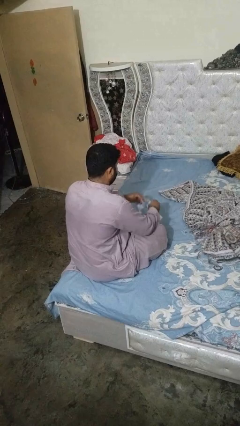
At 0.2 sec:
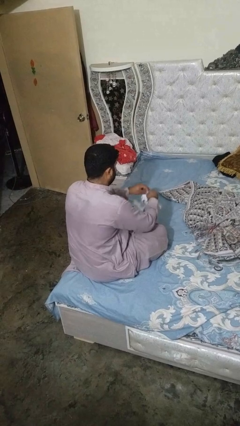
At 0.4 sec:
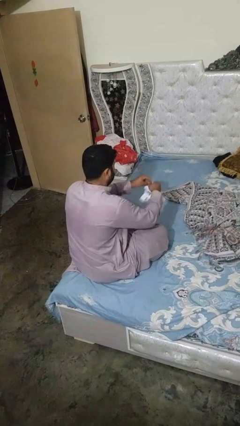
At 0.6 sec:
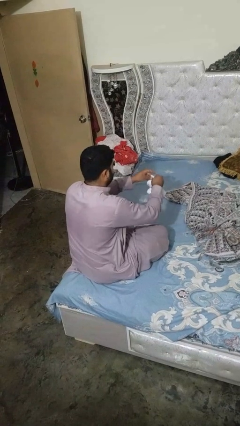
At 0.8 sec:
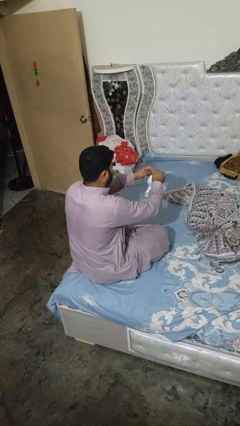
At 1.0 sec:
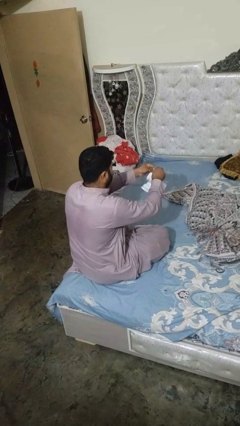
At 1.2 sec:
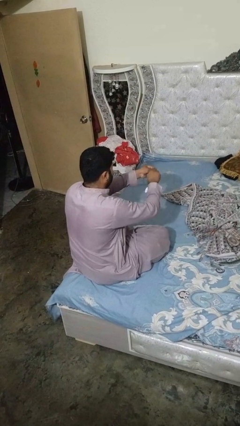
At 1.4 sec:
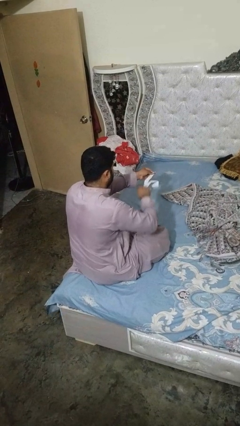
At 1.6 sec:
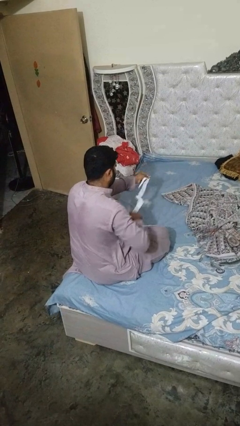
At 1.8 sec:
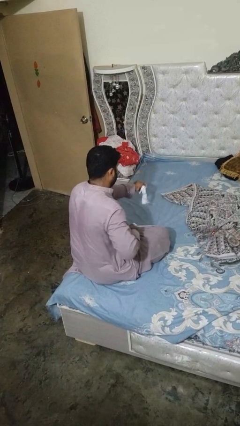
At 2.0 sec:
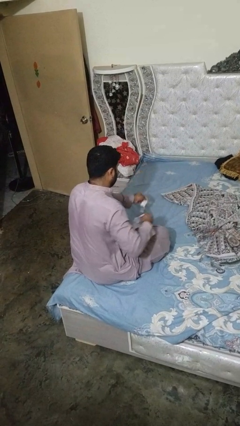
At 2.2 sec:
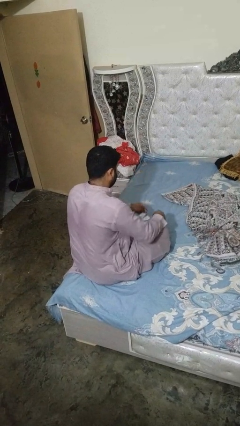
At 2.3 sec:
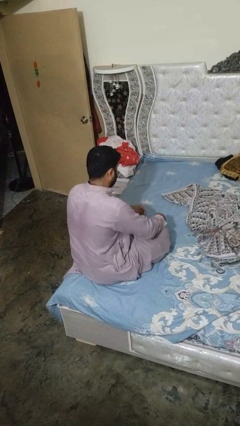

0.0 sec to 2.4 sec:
person tears paper

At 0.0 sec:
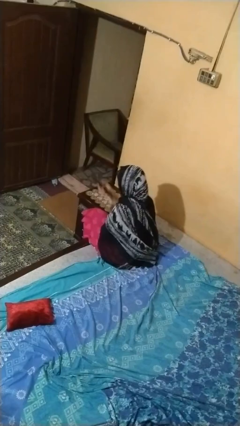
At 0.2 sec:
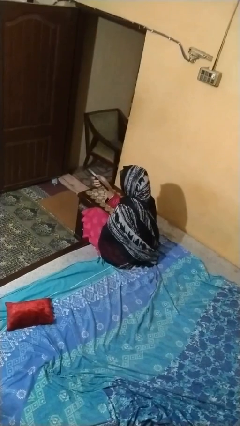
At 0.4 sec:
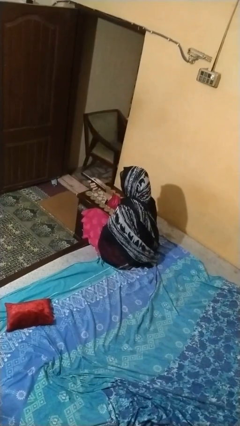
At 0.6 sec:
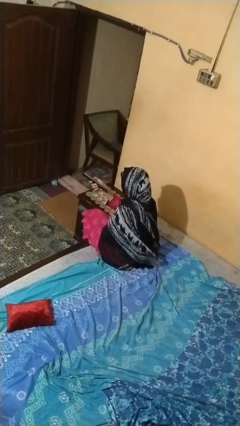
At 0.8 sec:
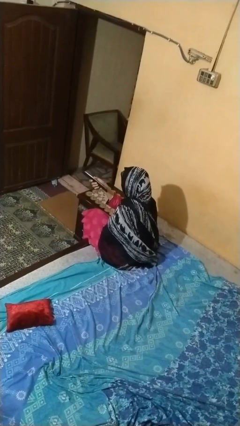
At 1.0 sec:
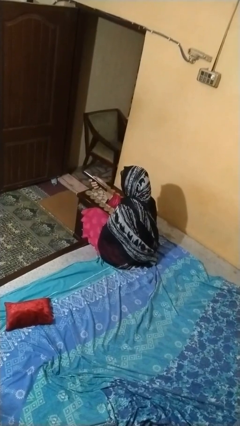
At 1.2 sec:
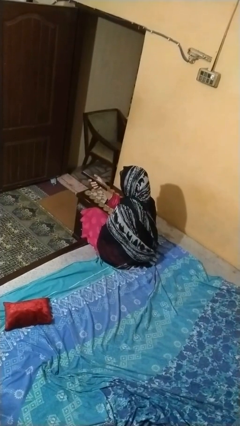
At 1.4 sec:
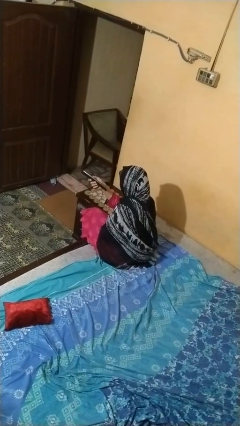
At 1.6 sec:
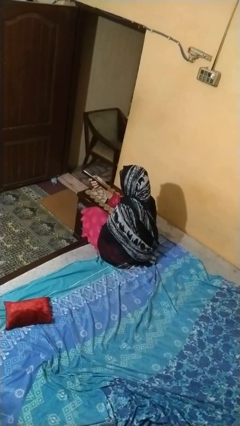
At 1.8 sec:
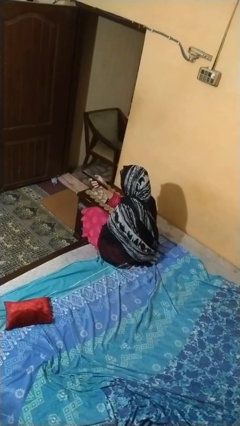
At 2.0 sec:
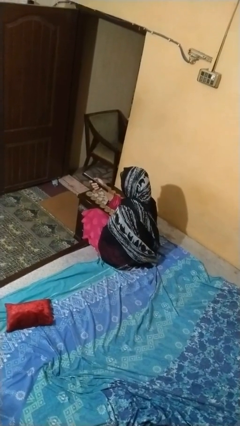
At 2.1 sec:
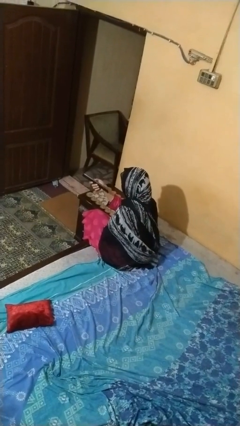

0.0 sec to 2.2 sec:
person uses television remote

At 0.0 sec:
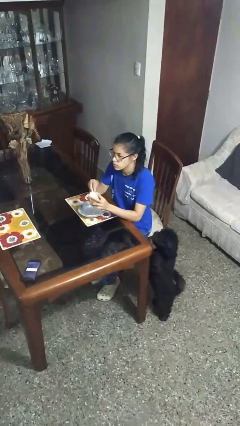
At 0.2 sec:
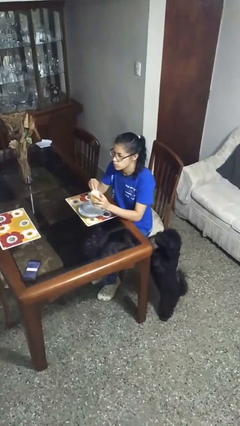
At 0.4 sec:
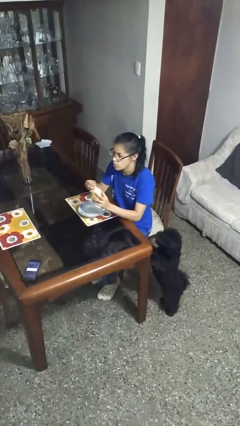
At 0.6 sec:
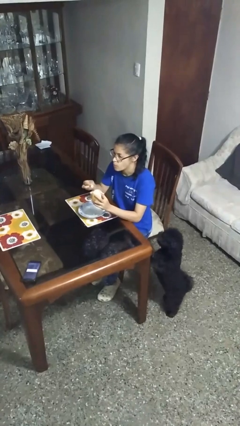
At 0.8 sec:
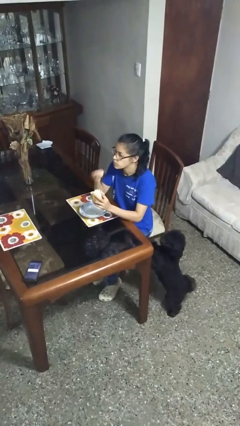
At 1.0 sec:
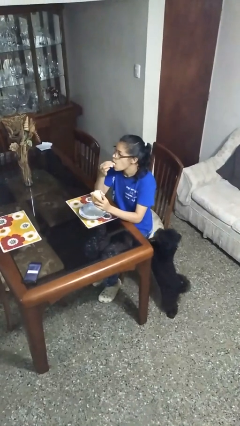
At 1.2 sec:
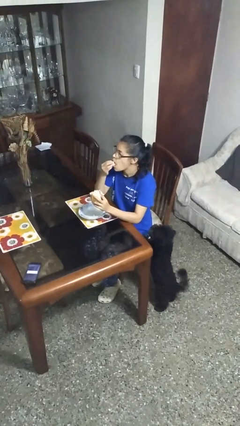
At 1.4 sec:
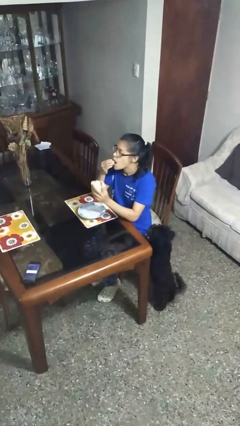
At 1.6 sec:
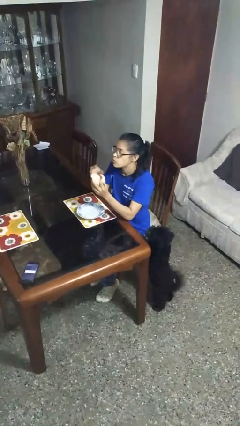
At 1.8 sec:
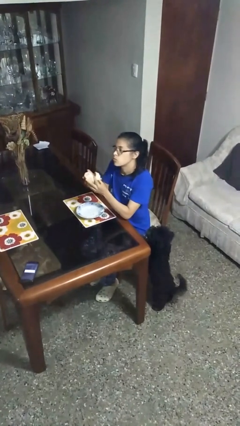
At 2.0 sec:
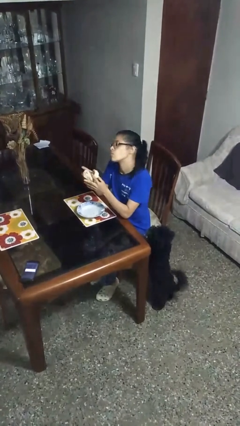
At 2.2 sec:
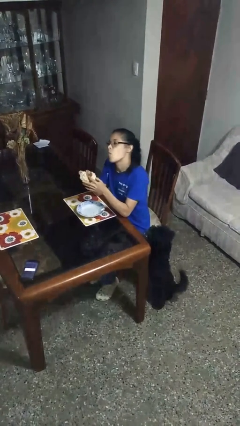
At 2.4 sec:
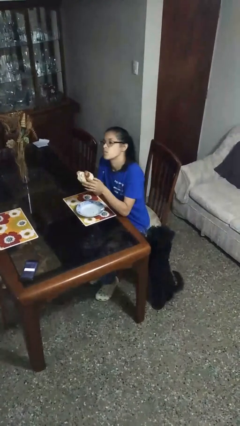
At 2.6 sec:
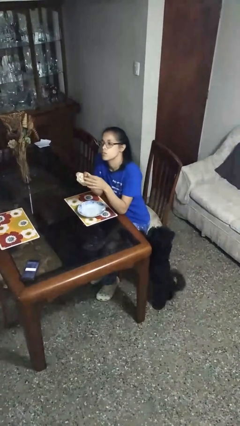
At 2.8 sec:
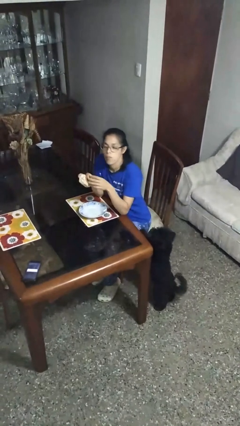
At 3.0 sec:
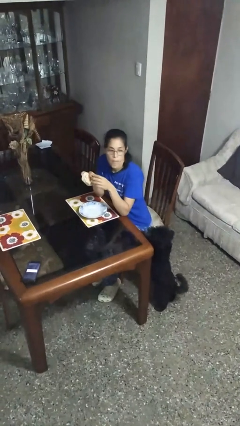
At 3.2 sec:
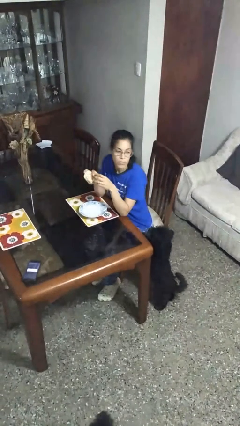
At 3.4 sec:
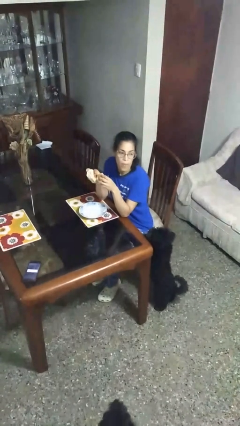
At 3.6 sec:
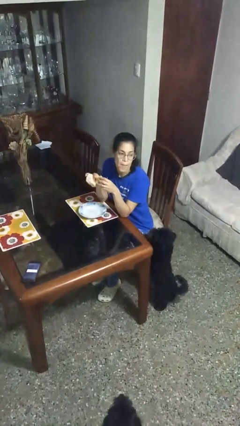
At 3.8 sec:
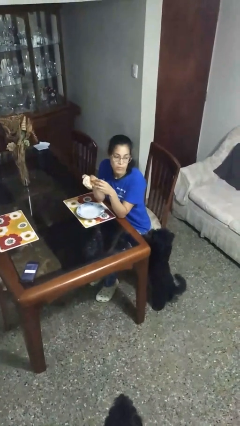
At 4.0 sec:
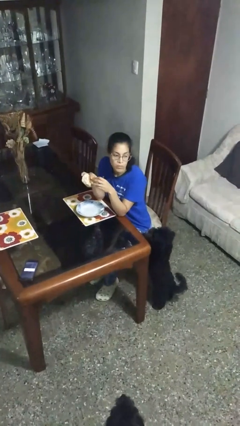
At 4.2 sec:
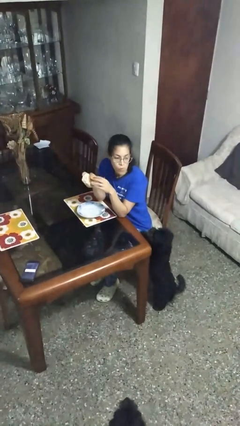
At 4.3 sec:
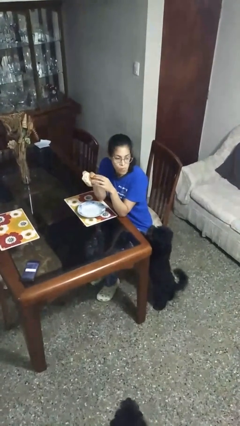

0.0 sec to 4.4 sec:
person eats with hands

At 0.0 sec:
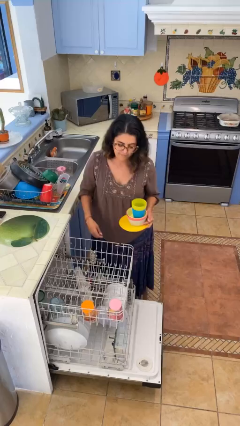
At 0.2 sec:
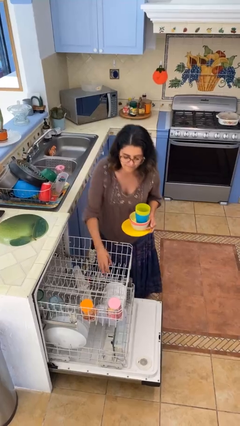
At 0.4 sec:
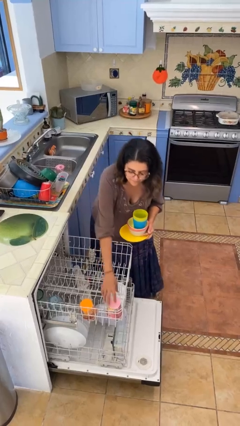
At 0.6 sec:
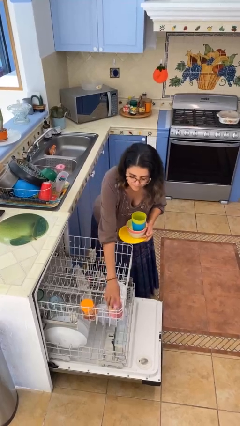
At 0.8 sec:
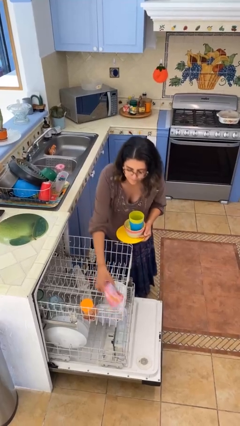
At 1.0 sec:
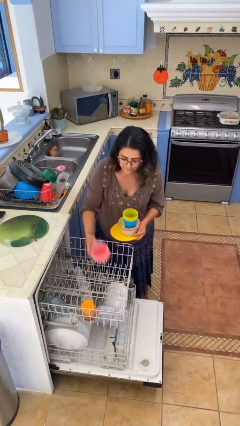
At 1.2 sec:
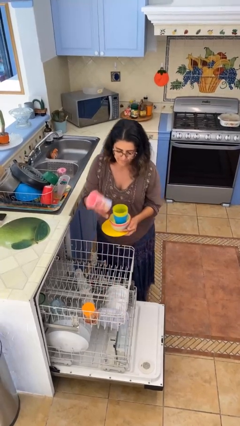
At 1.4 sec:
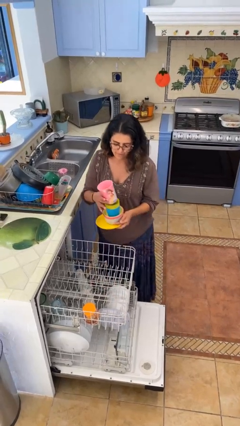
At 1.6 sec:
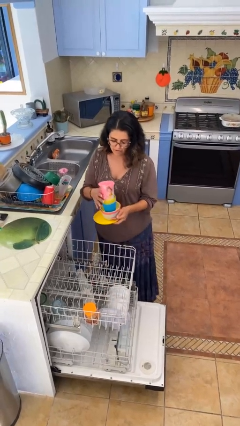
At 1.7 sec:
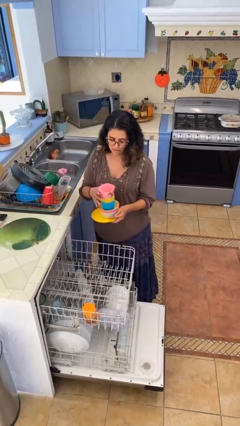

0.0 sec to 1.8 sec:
person unloads dishwasher

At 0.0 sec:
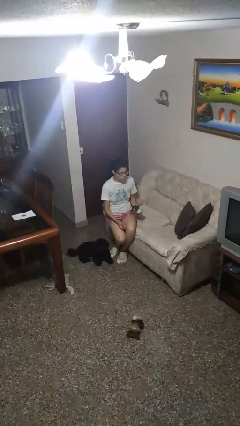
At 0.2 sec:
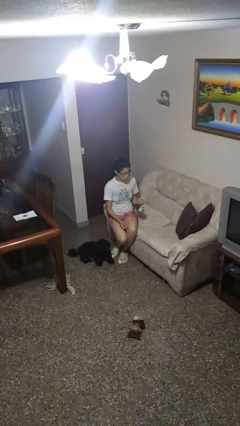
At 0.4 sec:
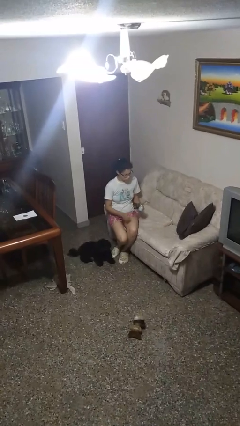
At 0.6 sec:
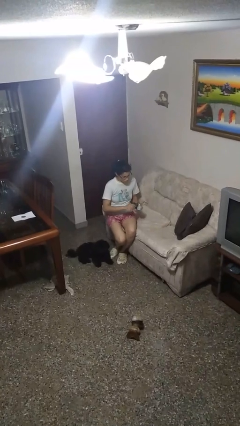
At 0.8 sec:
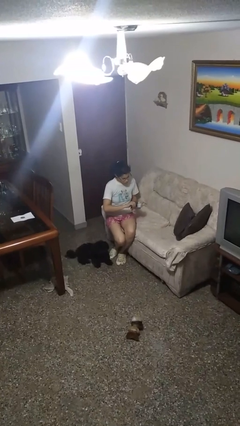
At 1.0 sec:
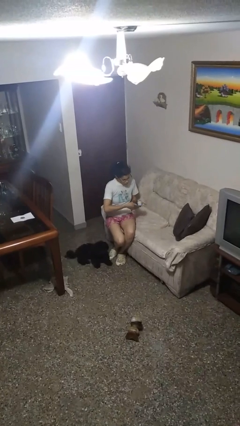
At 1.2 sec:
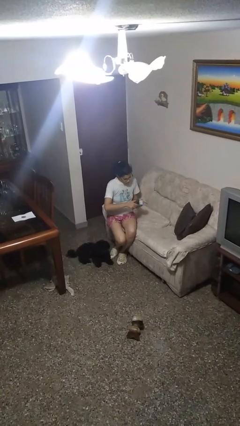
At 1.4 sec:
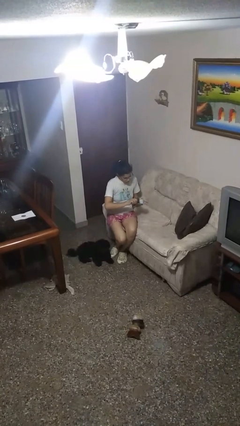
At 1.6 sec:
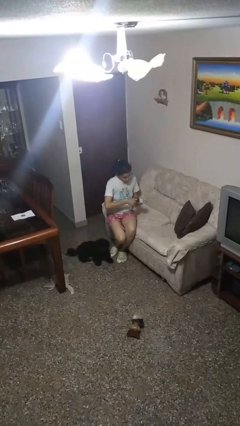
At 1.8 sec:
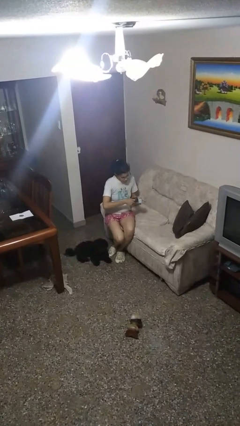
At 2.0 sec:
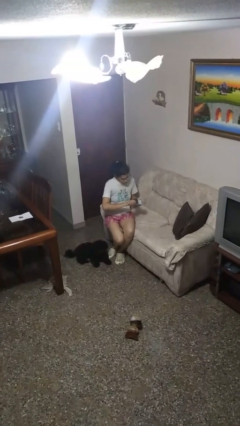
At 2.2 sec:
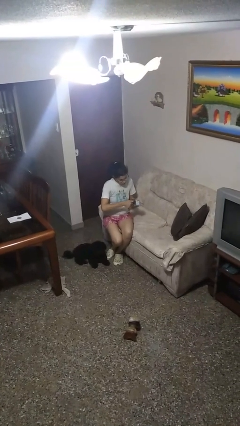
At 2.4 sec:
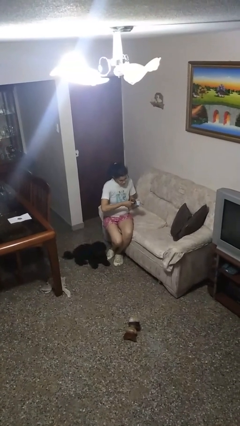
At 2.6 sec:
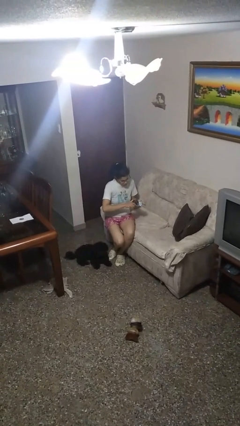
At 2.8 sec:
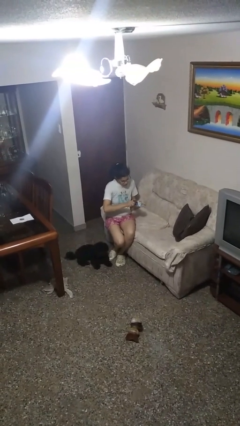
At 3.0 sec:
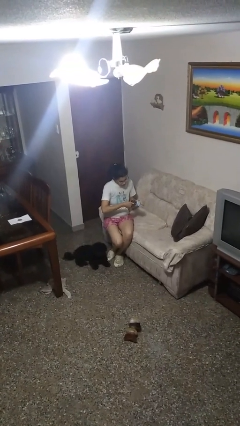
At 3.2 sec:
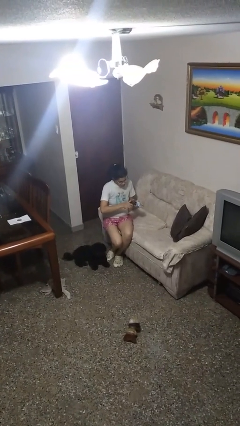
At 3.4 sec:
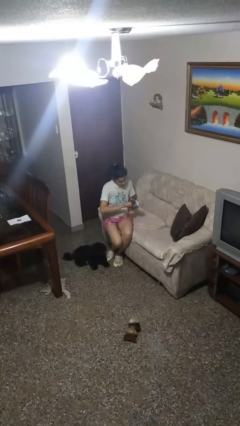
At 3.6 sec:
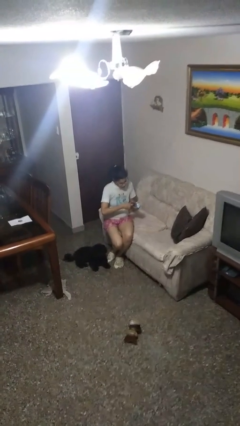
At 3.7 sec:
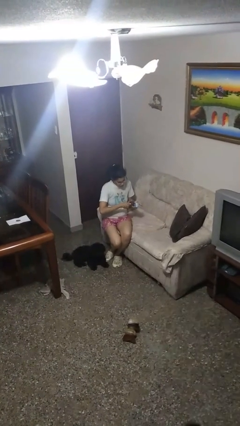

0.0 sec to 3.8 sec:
person opens can with can opener

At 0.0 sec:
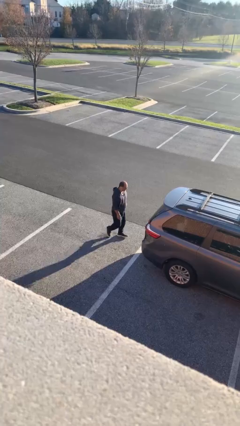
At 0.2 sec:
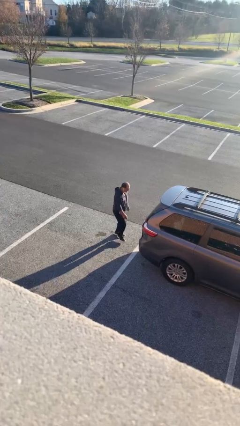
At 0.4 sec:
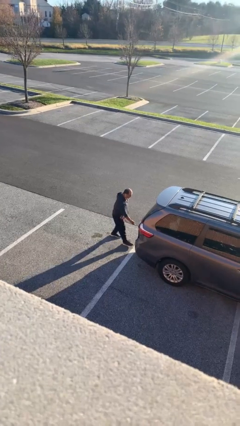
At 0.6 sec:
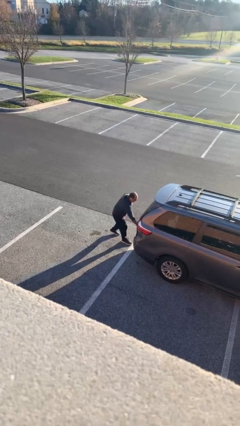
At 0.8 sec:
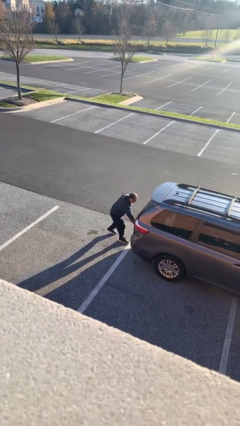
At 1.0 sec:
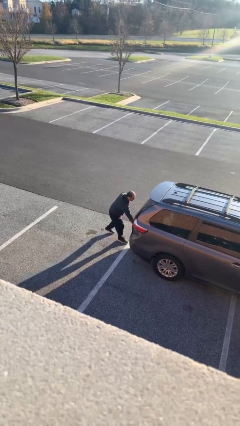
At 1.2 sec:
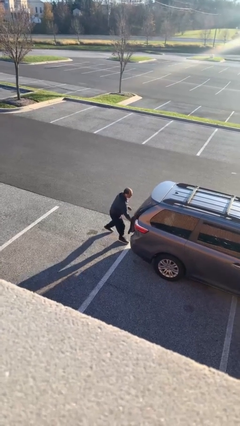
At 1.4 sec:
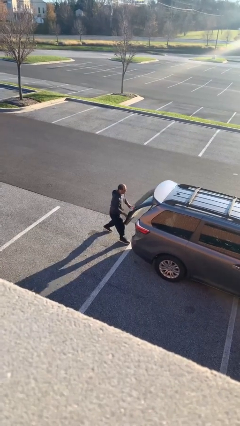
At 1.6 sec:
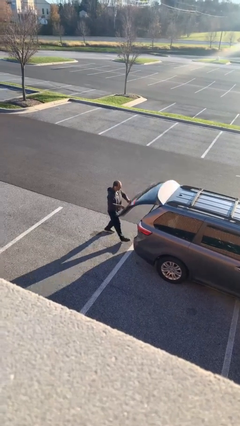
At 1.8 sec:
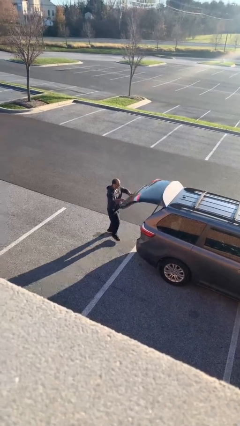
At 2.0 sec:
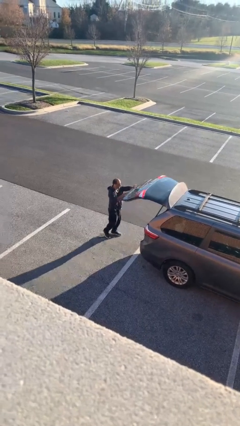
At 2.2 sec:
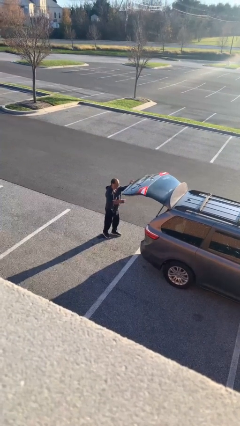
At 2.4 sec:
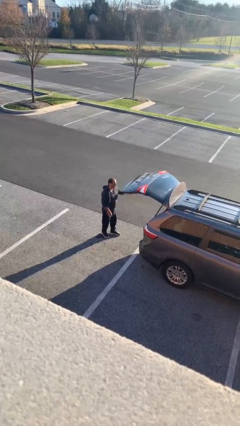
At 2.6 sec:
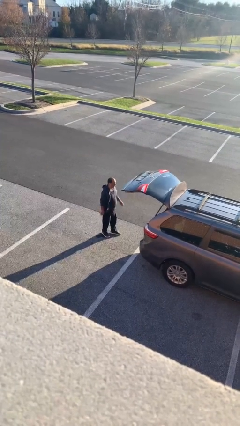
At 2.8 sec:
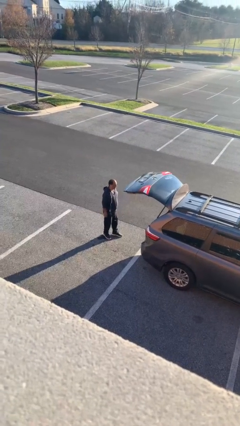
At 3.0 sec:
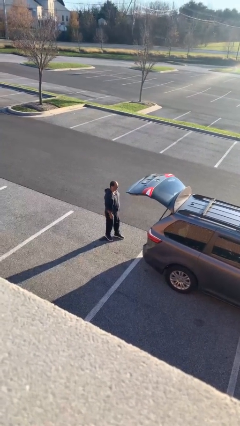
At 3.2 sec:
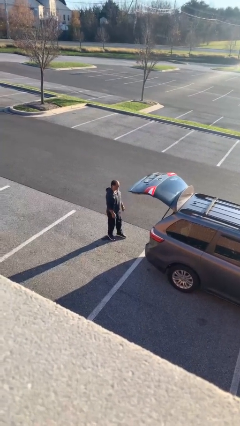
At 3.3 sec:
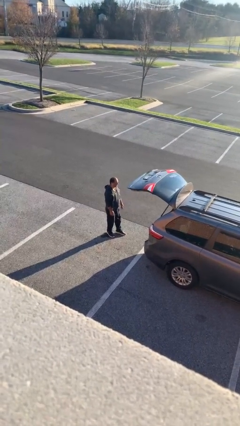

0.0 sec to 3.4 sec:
person opens car trunk
